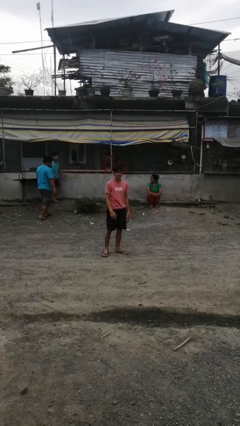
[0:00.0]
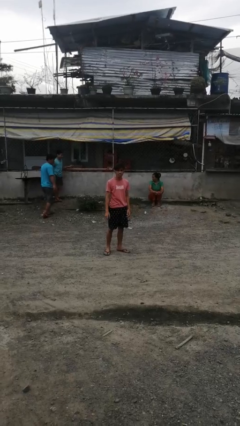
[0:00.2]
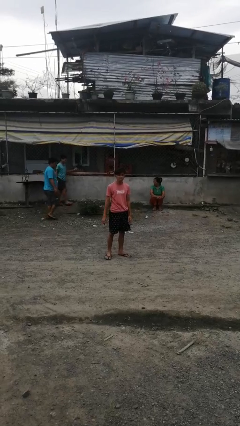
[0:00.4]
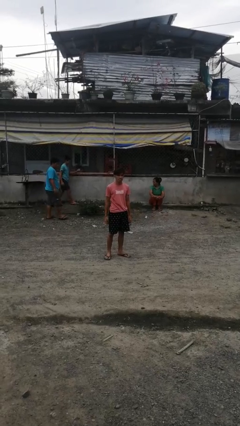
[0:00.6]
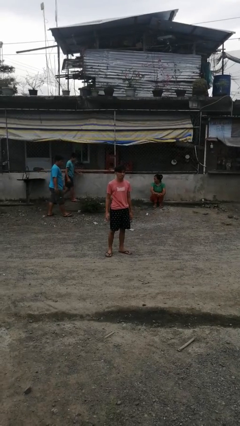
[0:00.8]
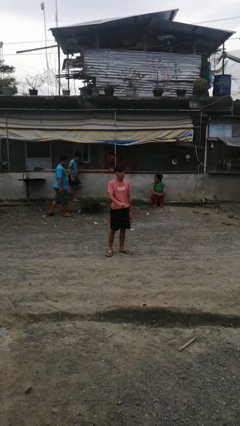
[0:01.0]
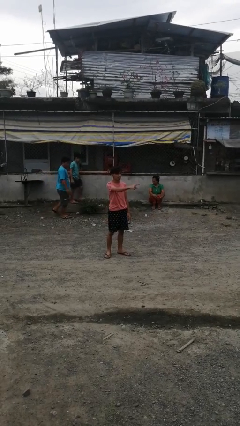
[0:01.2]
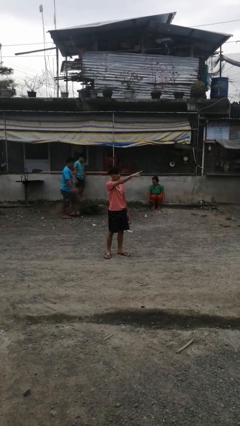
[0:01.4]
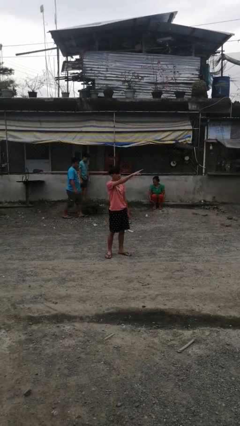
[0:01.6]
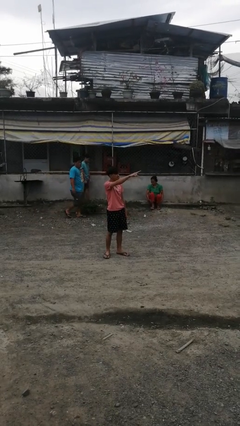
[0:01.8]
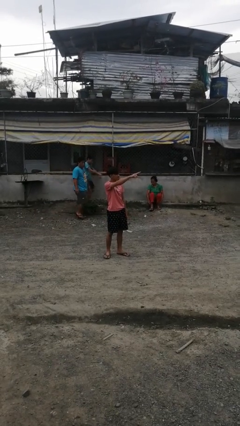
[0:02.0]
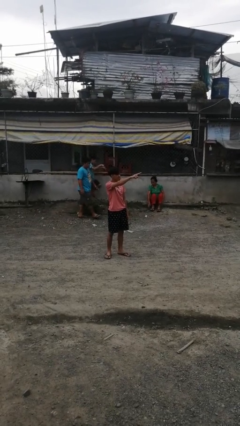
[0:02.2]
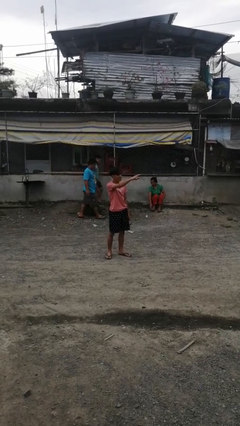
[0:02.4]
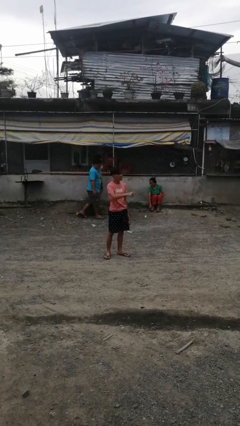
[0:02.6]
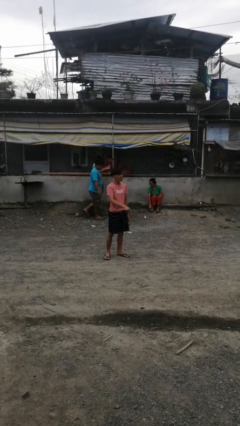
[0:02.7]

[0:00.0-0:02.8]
person points at person

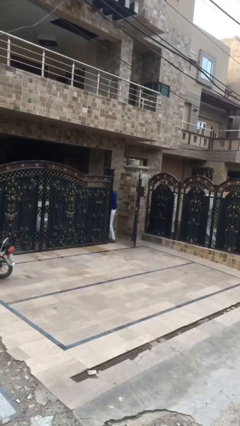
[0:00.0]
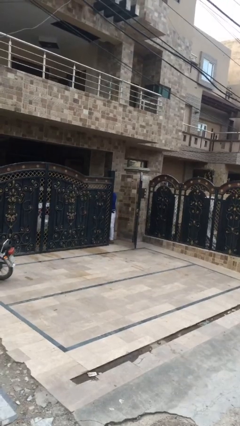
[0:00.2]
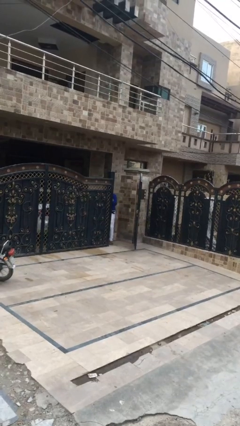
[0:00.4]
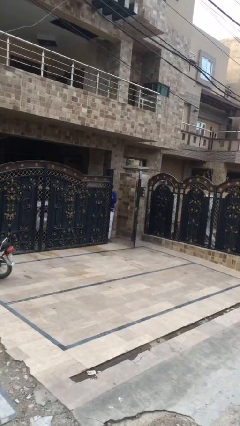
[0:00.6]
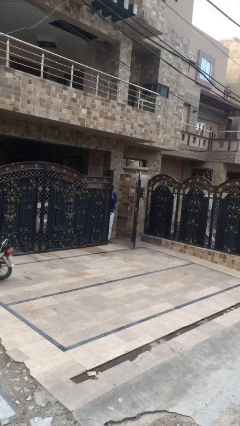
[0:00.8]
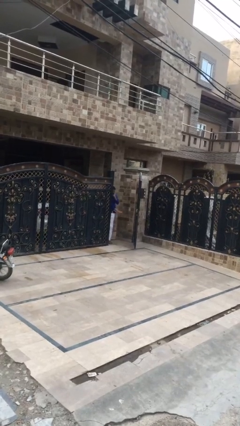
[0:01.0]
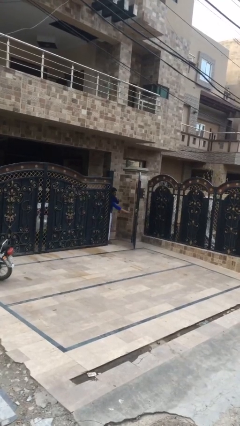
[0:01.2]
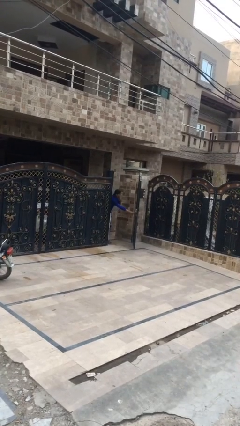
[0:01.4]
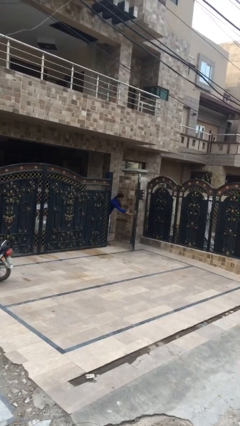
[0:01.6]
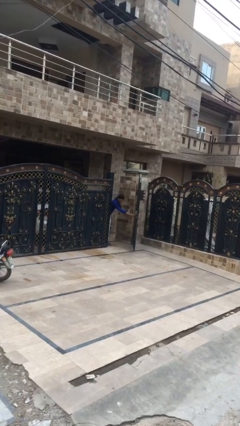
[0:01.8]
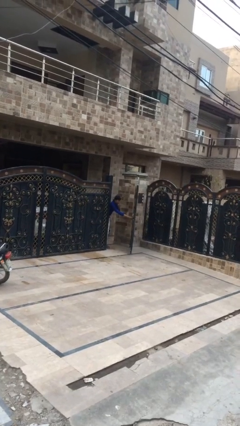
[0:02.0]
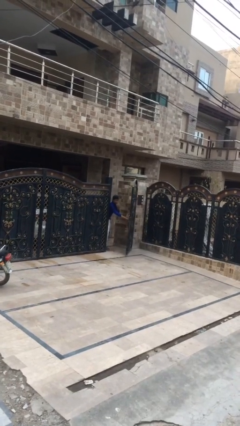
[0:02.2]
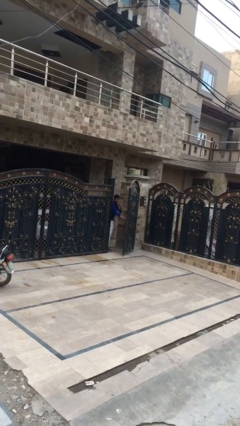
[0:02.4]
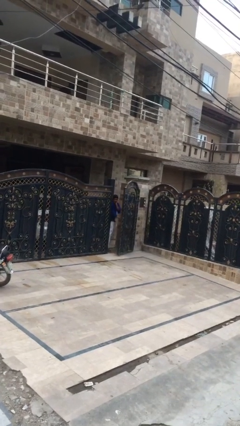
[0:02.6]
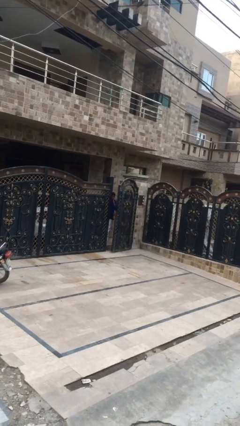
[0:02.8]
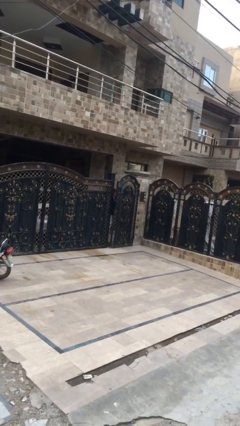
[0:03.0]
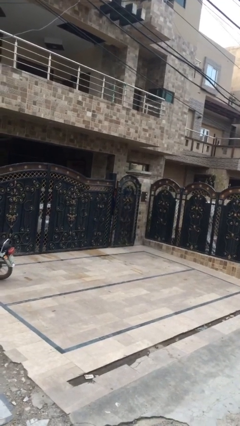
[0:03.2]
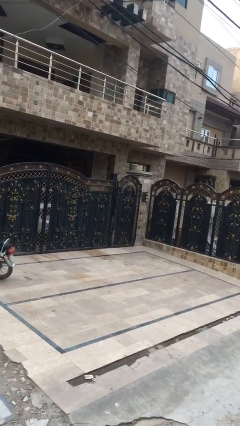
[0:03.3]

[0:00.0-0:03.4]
person closes facility door

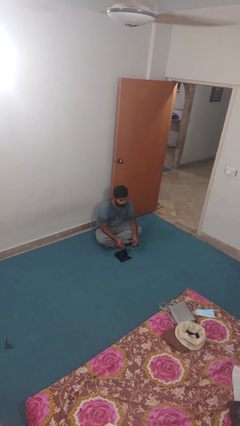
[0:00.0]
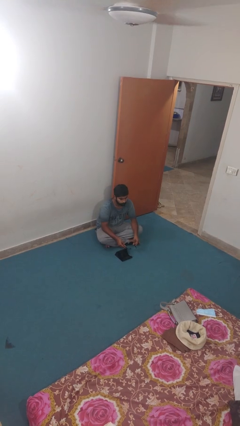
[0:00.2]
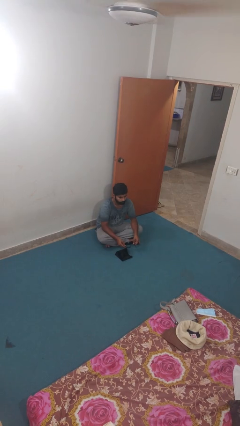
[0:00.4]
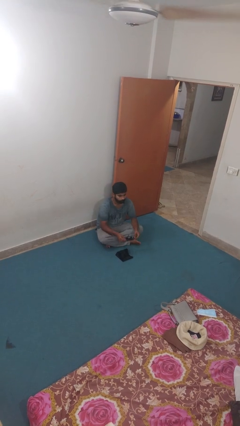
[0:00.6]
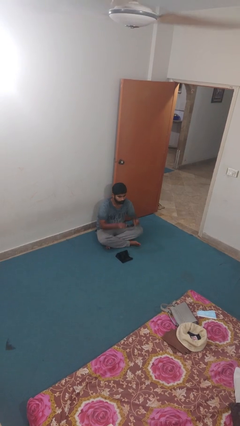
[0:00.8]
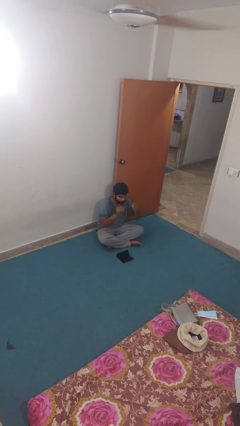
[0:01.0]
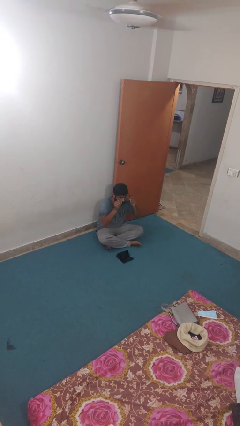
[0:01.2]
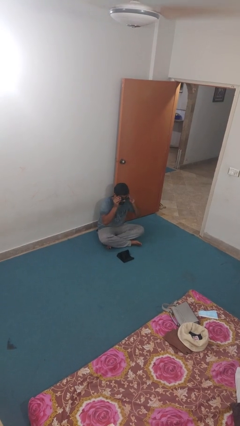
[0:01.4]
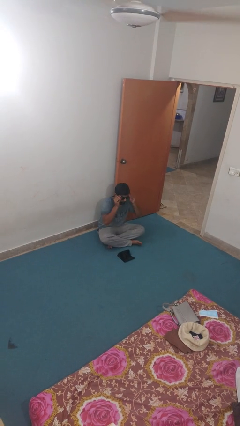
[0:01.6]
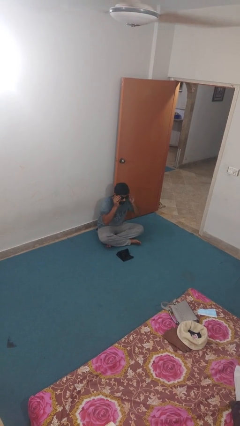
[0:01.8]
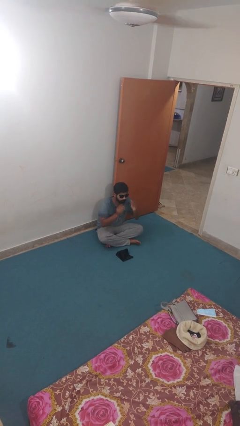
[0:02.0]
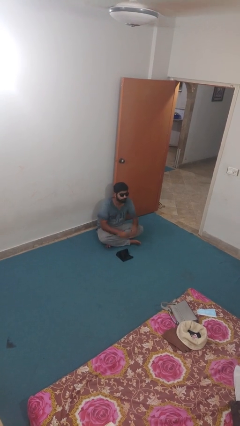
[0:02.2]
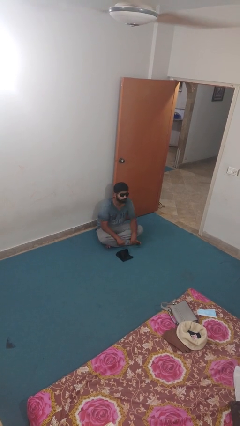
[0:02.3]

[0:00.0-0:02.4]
person puts on sunglasses

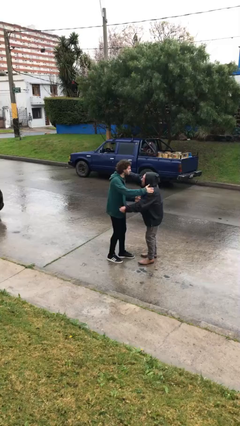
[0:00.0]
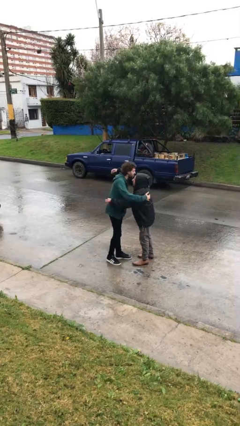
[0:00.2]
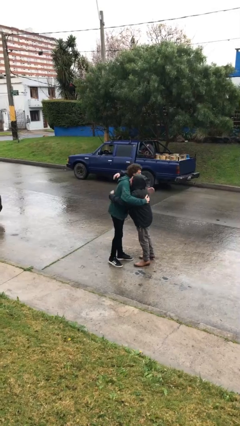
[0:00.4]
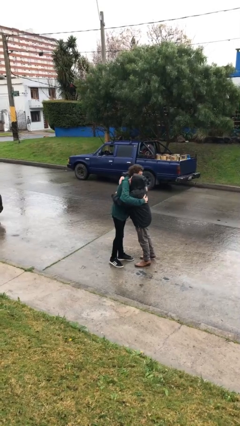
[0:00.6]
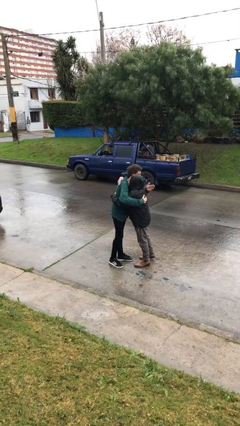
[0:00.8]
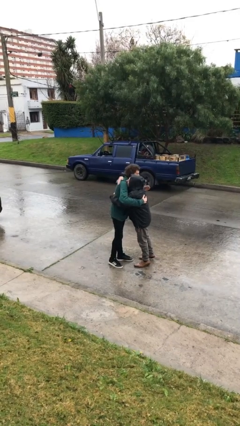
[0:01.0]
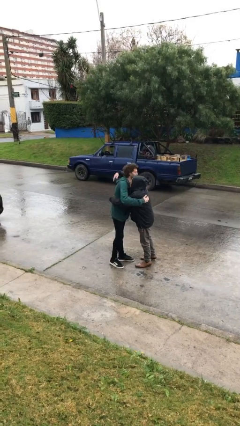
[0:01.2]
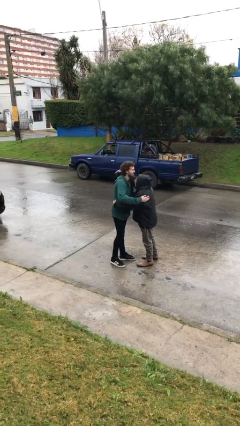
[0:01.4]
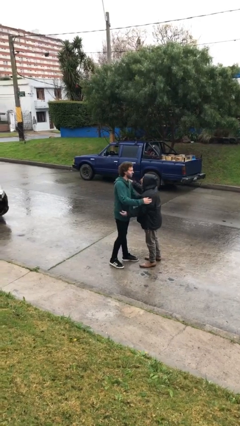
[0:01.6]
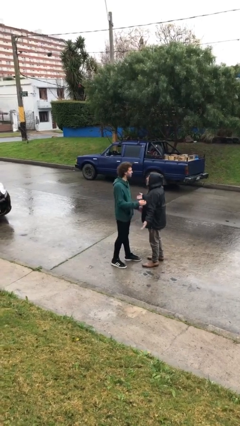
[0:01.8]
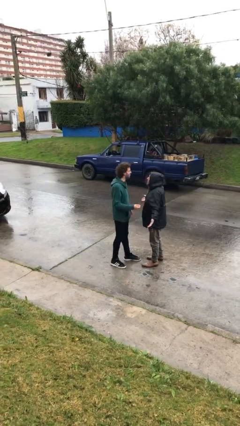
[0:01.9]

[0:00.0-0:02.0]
person embraces person

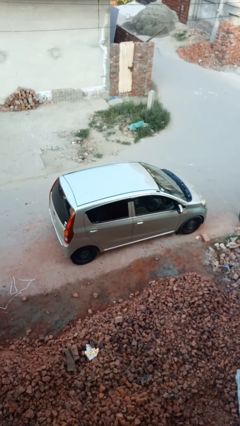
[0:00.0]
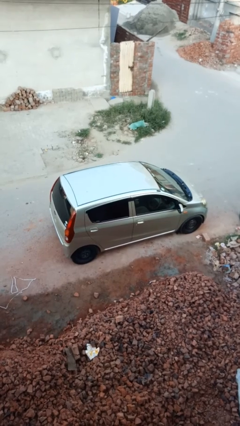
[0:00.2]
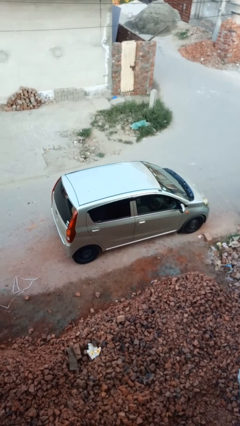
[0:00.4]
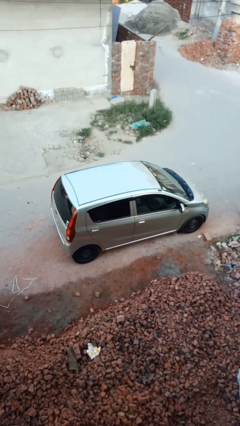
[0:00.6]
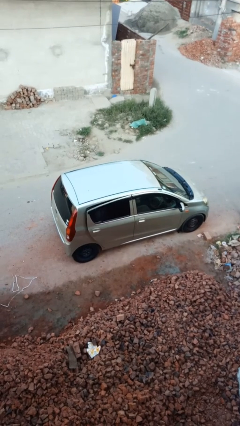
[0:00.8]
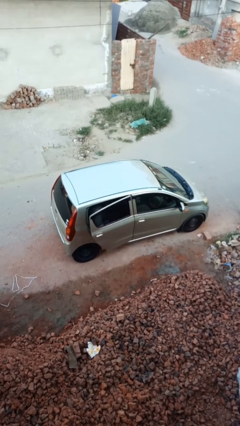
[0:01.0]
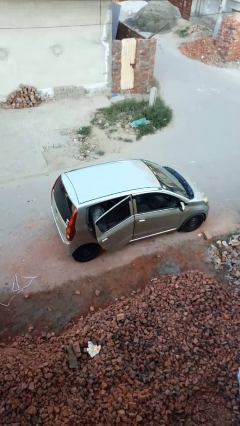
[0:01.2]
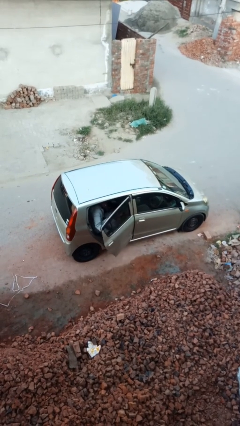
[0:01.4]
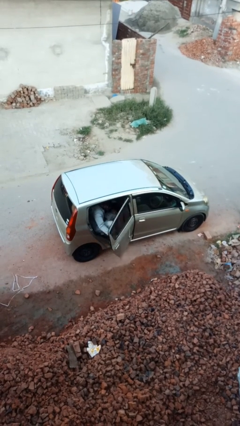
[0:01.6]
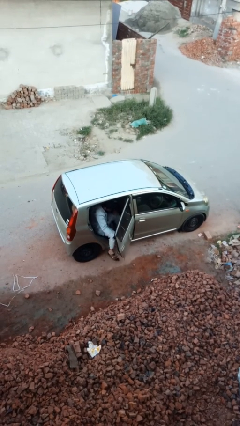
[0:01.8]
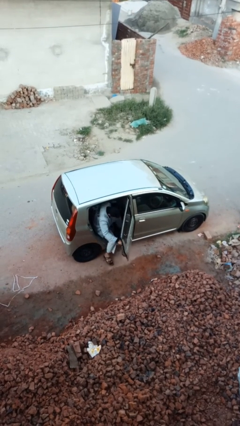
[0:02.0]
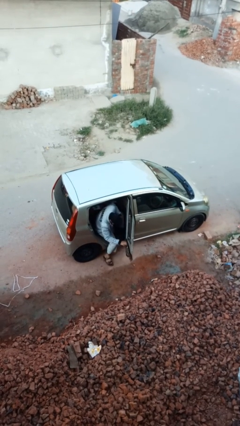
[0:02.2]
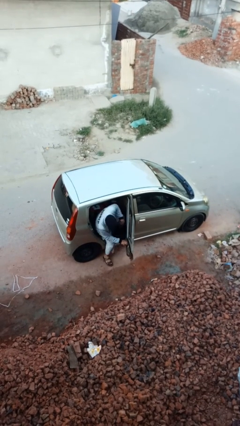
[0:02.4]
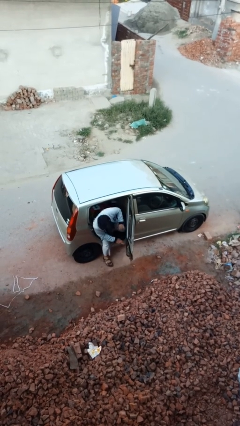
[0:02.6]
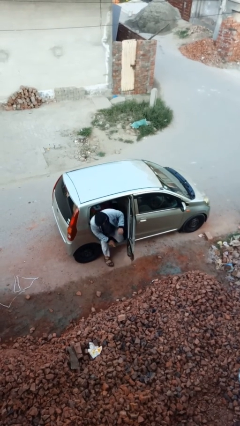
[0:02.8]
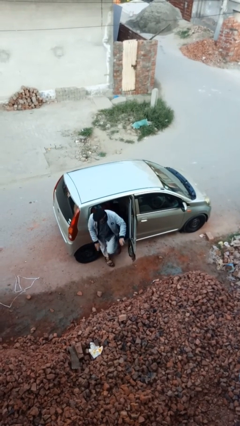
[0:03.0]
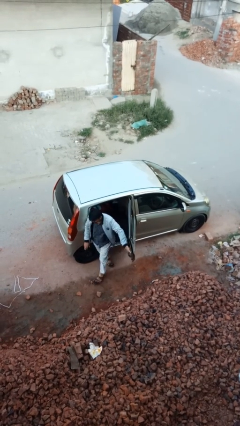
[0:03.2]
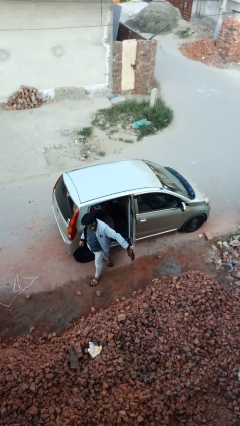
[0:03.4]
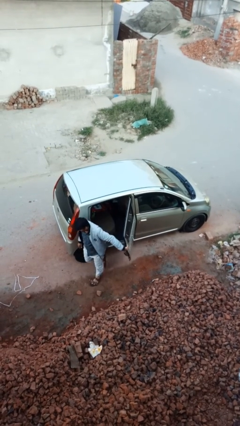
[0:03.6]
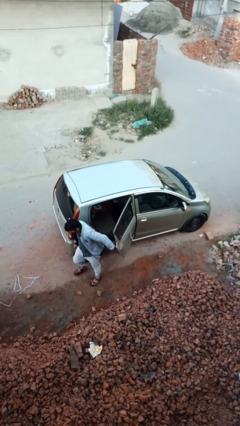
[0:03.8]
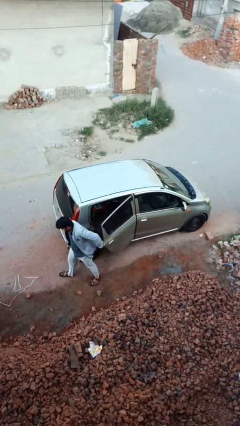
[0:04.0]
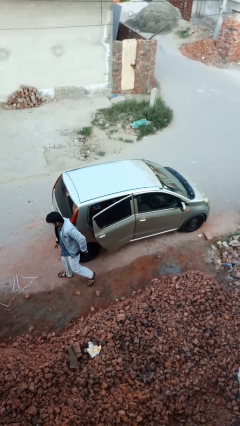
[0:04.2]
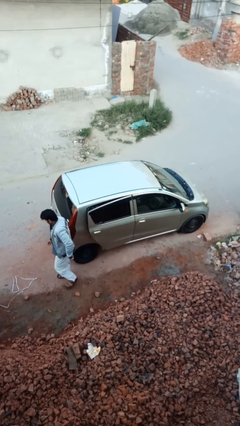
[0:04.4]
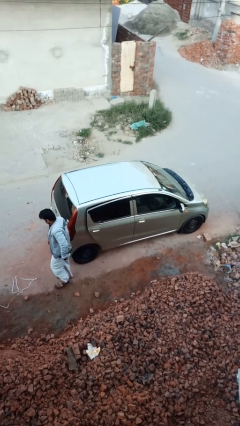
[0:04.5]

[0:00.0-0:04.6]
car drops off person

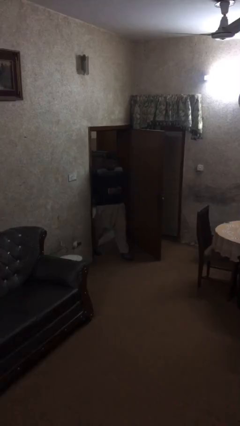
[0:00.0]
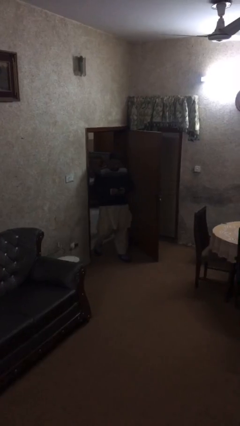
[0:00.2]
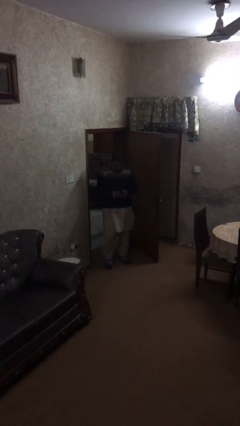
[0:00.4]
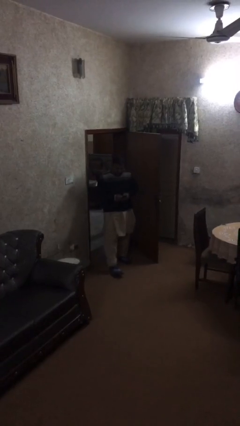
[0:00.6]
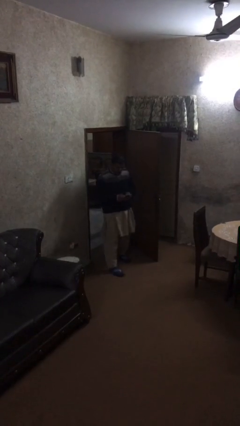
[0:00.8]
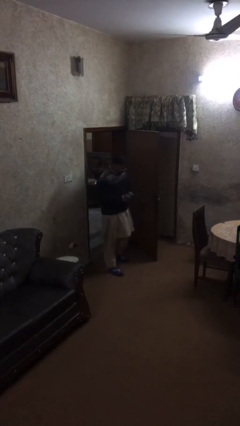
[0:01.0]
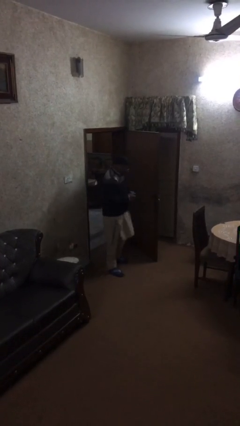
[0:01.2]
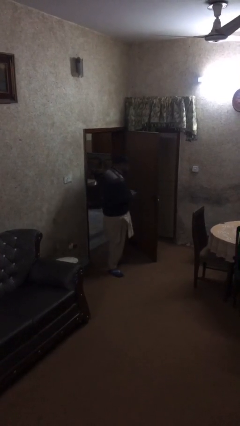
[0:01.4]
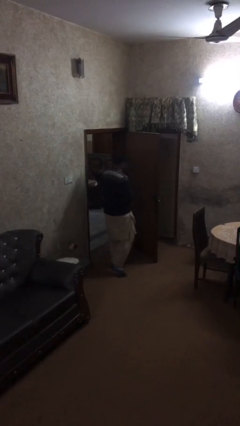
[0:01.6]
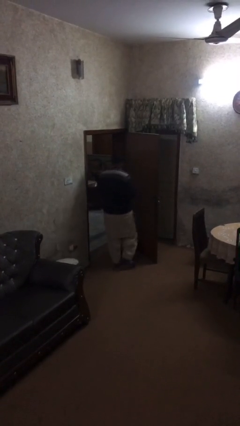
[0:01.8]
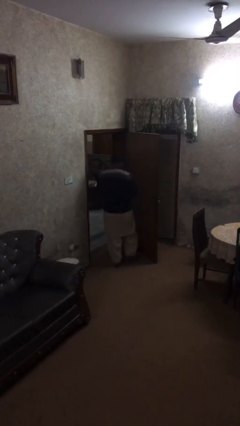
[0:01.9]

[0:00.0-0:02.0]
person enters scene through structure

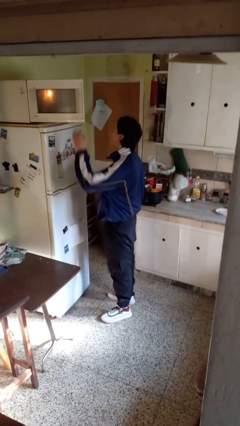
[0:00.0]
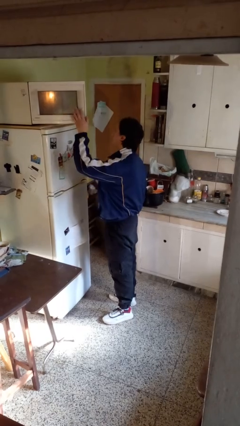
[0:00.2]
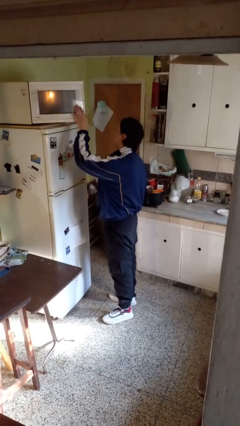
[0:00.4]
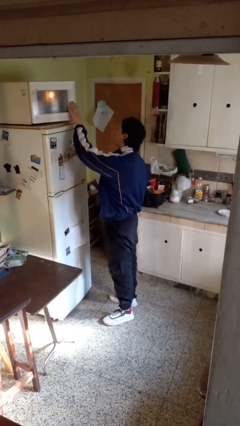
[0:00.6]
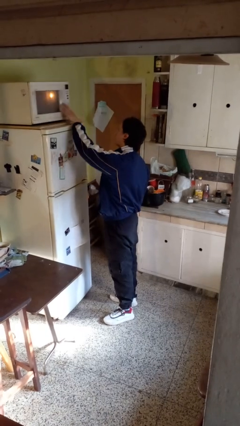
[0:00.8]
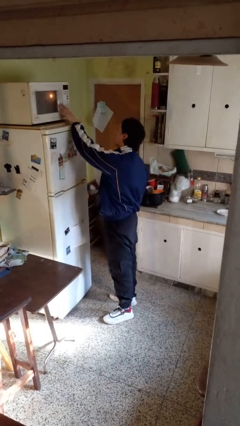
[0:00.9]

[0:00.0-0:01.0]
person closes microwave
